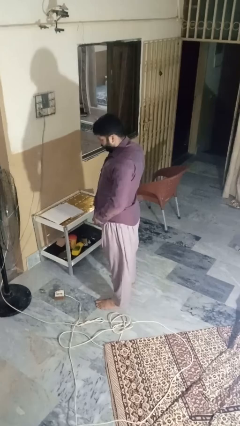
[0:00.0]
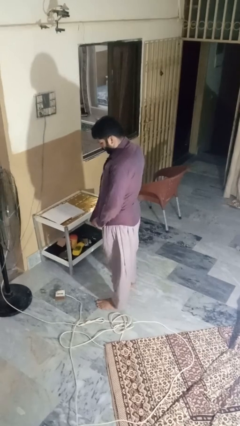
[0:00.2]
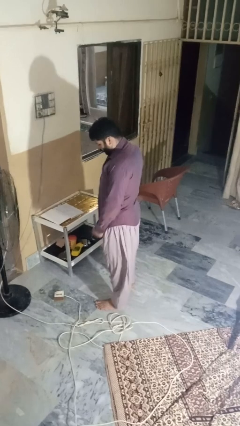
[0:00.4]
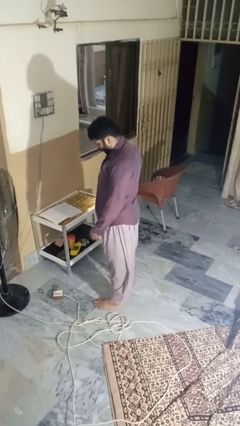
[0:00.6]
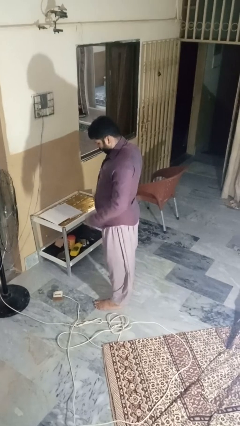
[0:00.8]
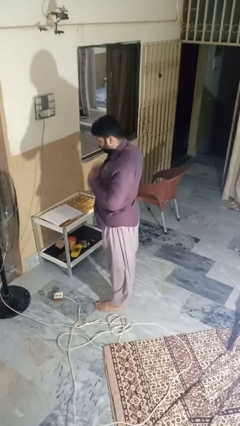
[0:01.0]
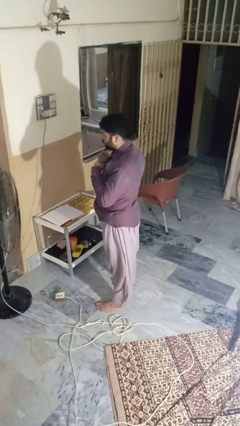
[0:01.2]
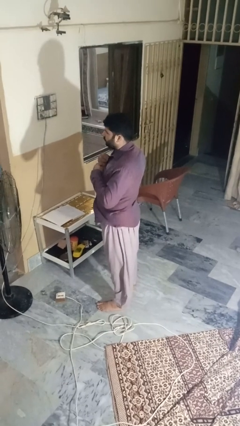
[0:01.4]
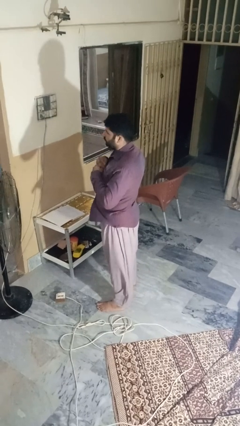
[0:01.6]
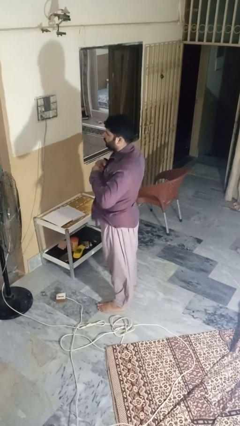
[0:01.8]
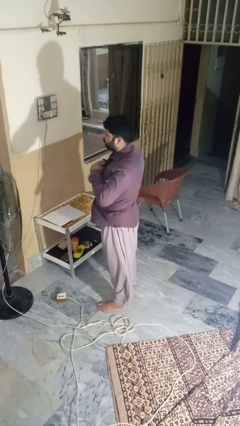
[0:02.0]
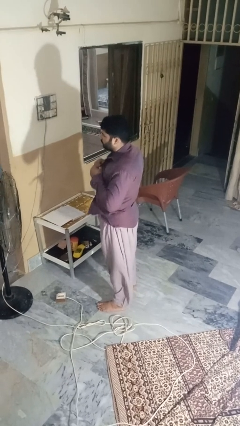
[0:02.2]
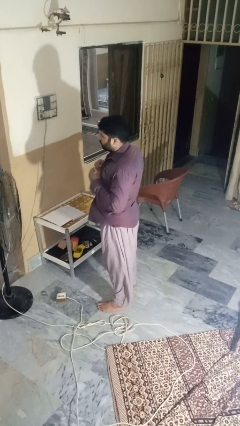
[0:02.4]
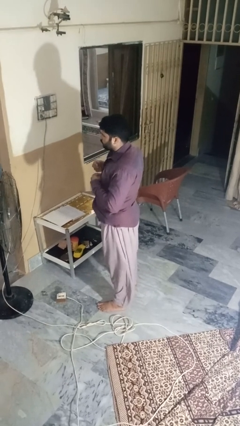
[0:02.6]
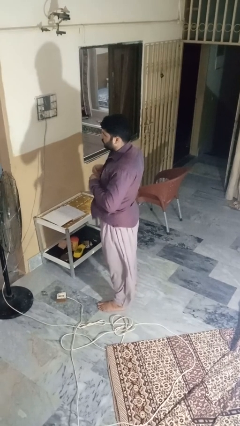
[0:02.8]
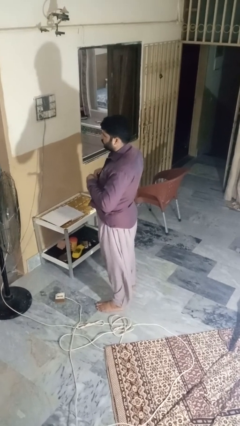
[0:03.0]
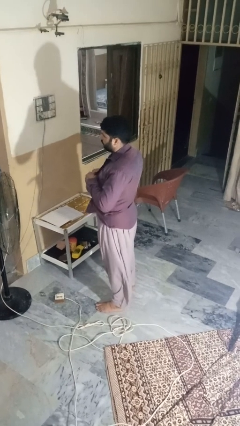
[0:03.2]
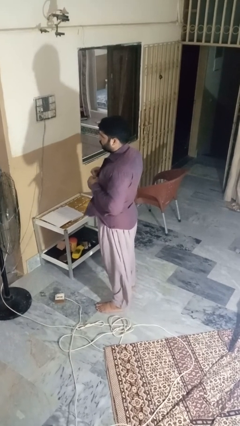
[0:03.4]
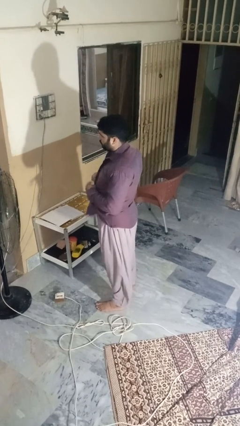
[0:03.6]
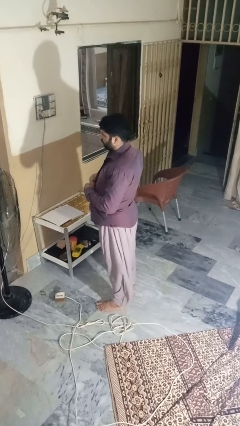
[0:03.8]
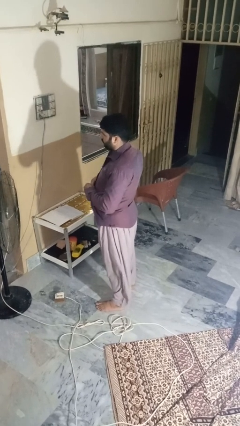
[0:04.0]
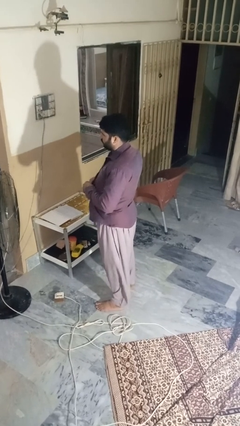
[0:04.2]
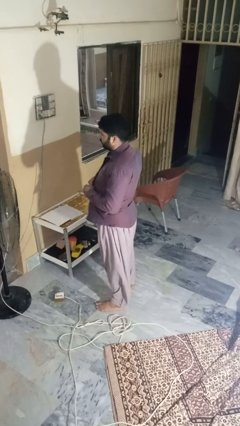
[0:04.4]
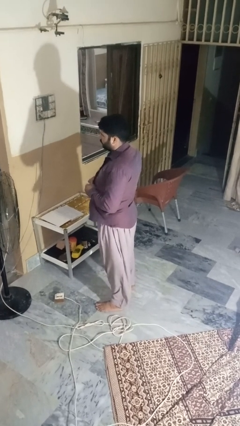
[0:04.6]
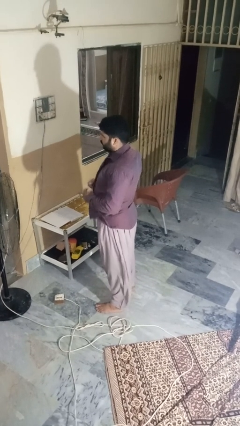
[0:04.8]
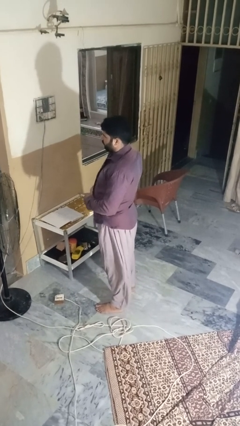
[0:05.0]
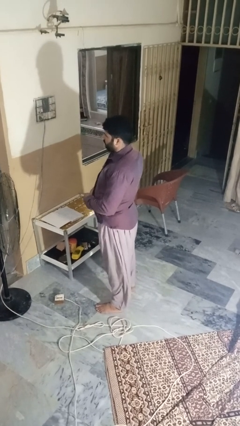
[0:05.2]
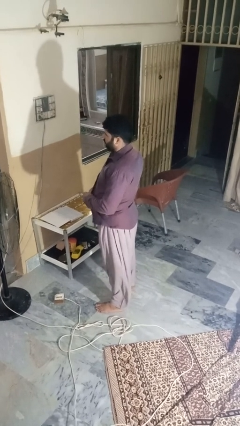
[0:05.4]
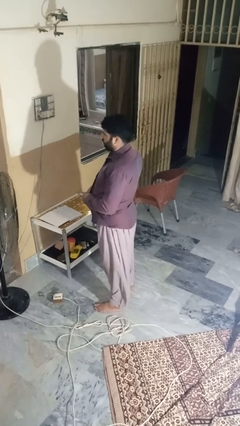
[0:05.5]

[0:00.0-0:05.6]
person unbuttons shirt

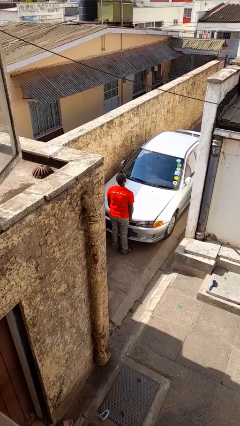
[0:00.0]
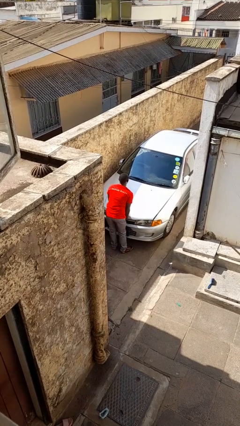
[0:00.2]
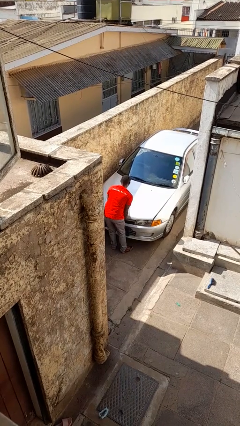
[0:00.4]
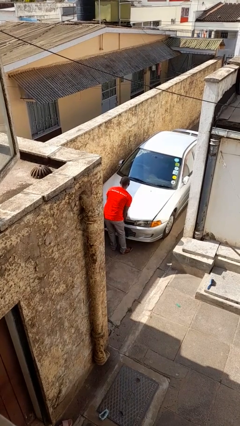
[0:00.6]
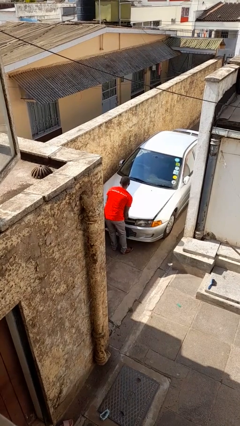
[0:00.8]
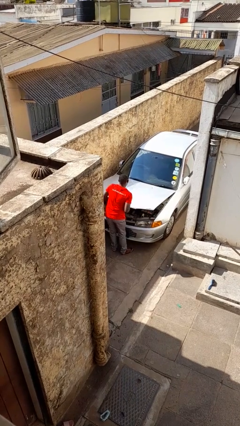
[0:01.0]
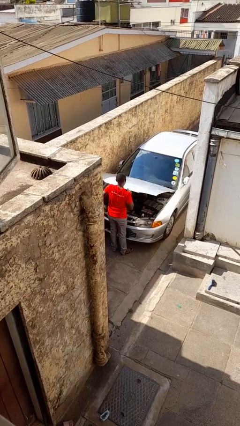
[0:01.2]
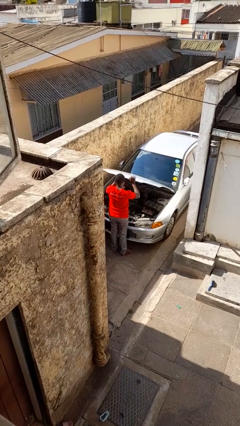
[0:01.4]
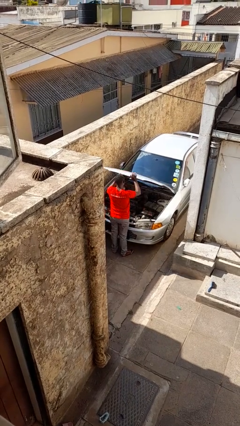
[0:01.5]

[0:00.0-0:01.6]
person opens car hood

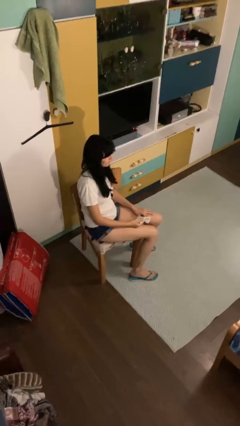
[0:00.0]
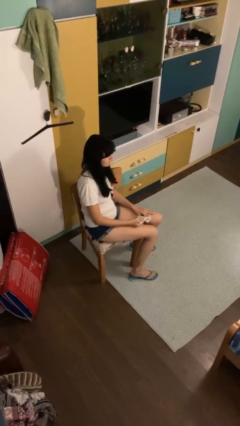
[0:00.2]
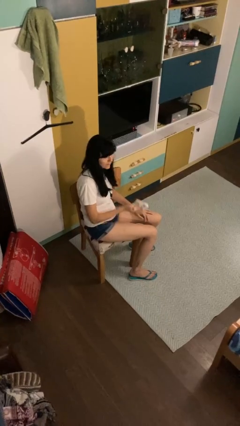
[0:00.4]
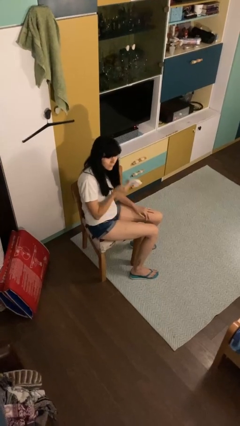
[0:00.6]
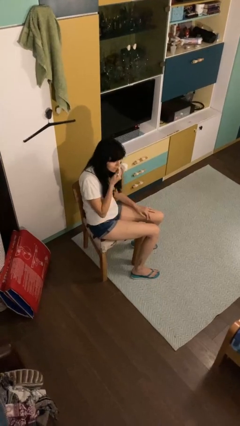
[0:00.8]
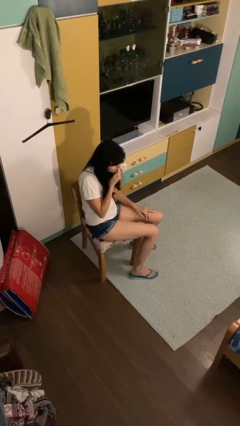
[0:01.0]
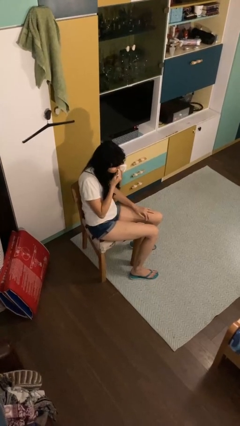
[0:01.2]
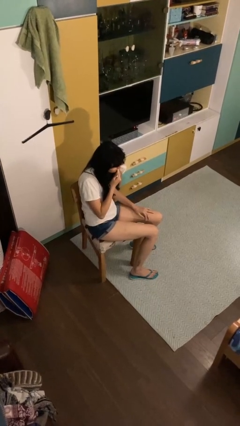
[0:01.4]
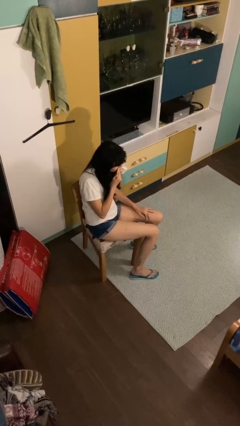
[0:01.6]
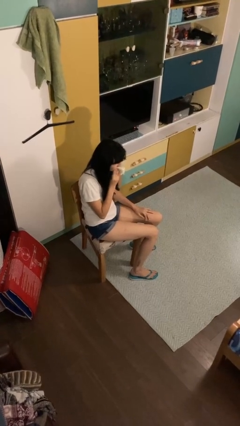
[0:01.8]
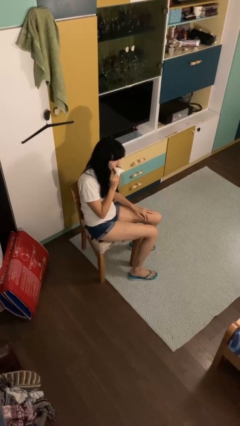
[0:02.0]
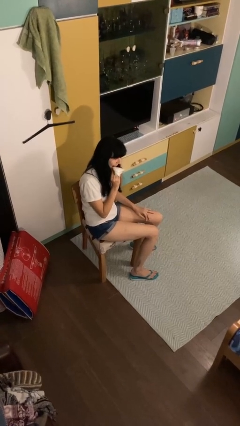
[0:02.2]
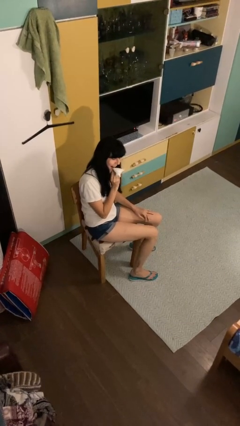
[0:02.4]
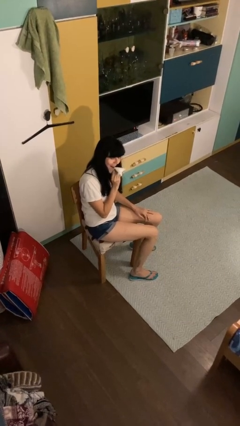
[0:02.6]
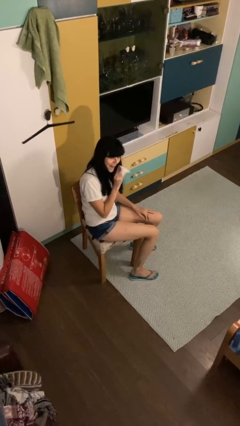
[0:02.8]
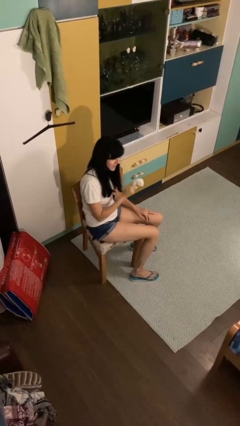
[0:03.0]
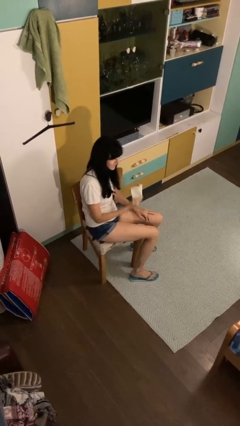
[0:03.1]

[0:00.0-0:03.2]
person wipes mouth with napkin

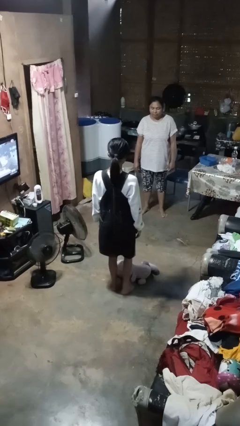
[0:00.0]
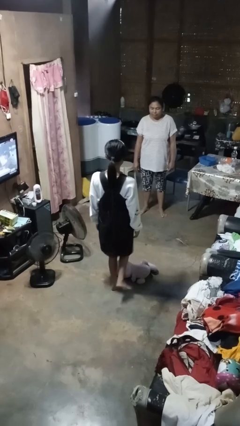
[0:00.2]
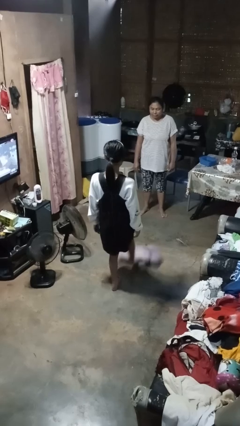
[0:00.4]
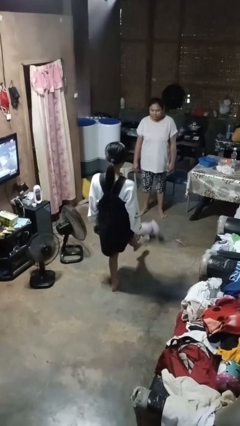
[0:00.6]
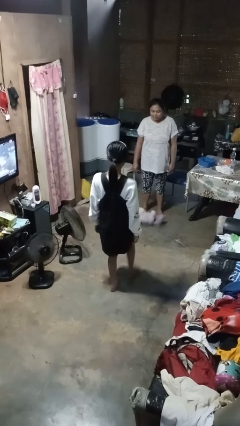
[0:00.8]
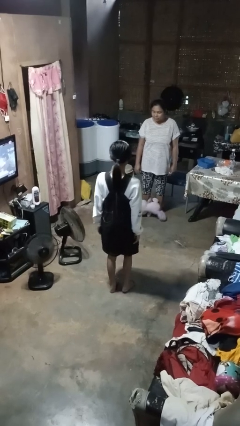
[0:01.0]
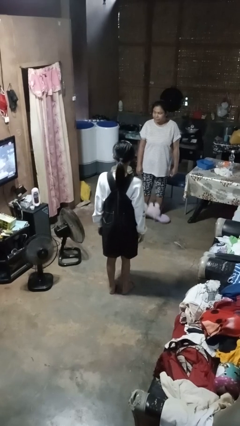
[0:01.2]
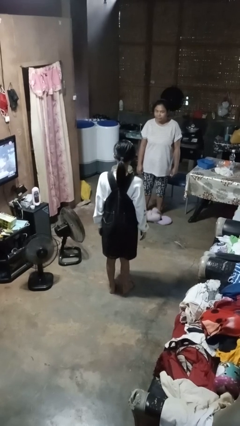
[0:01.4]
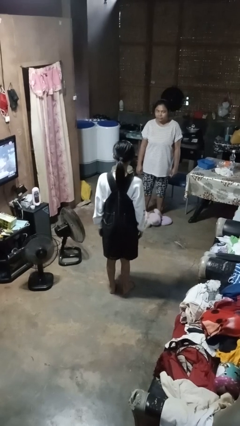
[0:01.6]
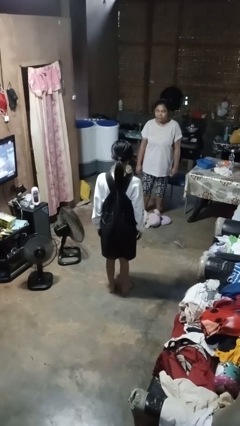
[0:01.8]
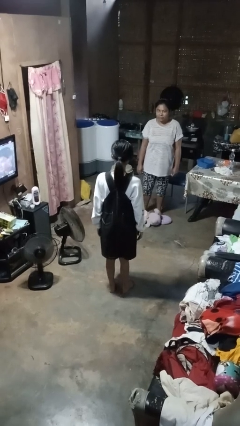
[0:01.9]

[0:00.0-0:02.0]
person kicks object to person

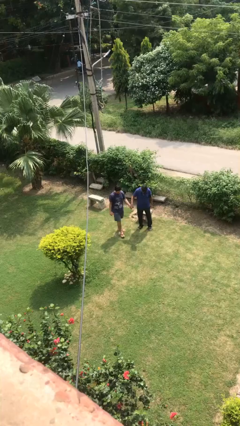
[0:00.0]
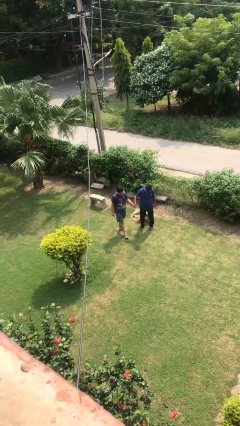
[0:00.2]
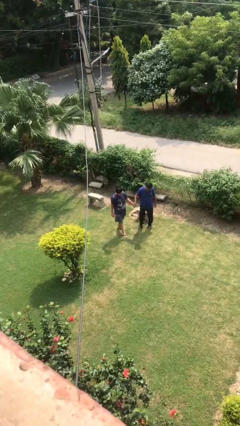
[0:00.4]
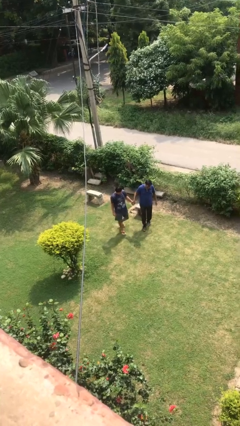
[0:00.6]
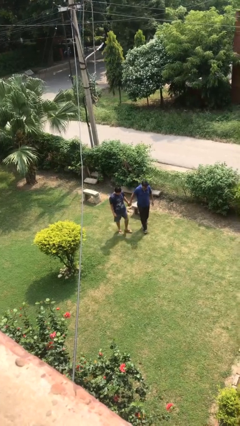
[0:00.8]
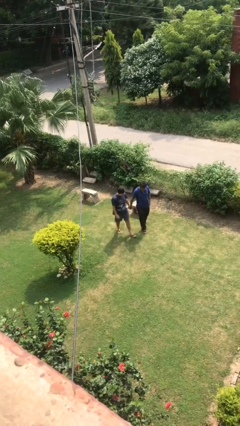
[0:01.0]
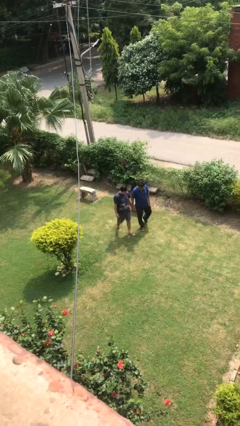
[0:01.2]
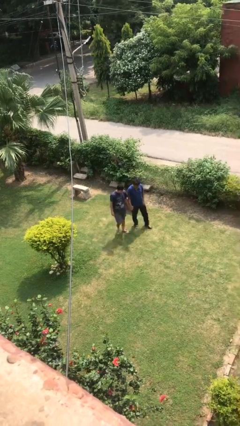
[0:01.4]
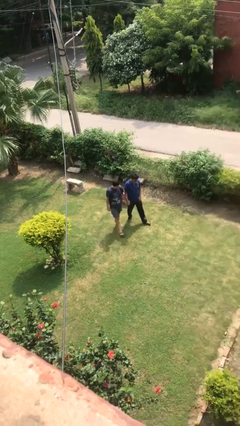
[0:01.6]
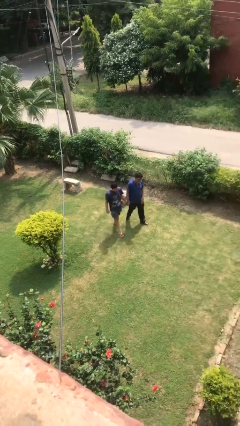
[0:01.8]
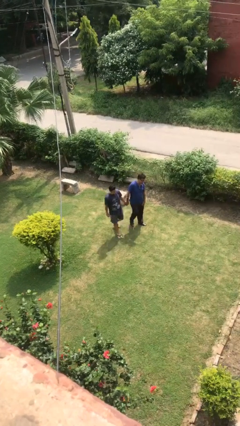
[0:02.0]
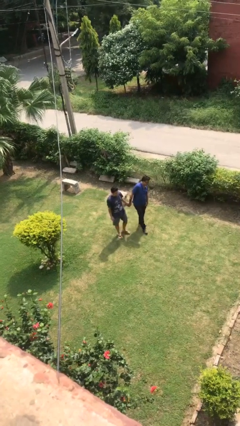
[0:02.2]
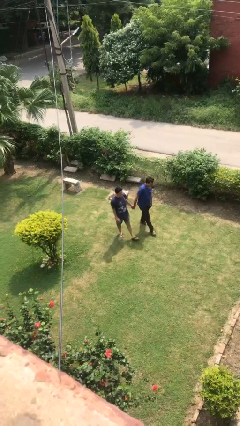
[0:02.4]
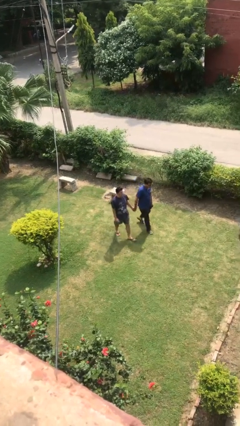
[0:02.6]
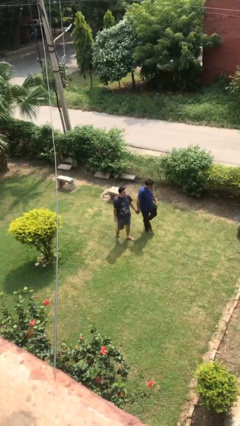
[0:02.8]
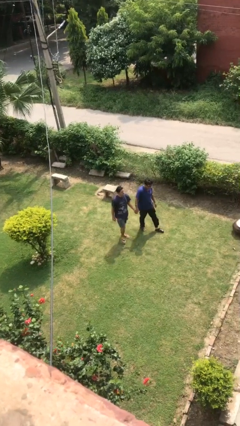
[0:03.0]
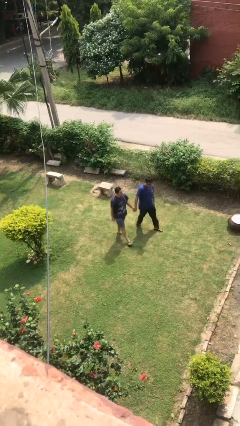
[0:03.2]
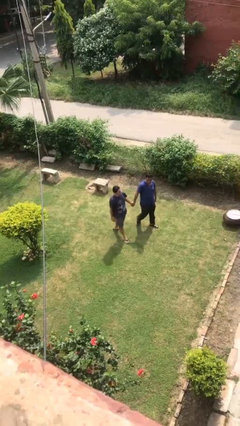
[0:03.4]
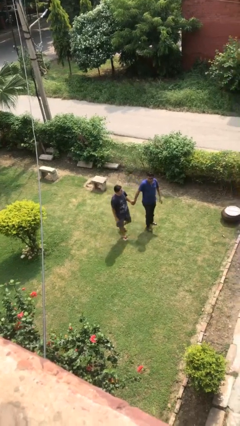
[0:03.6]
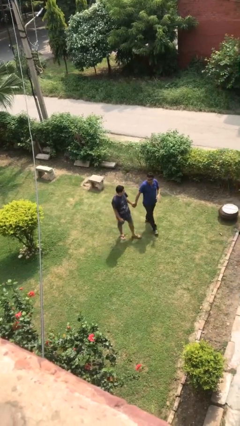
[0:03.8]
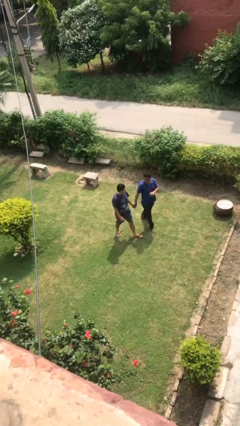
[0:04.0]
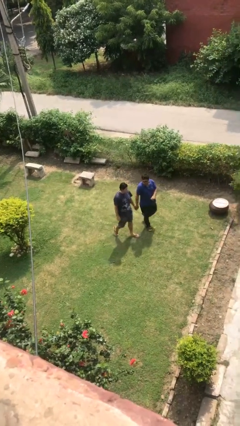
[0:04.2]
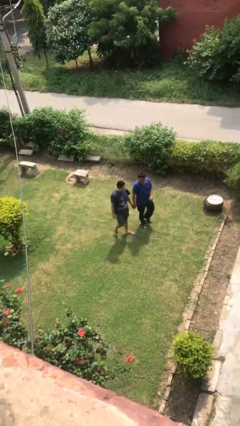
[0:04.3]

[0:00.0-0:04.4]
person holds hand

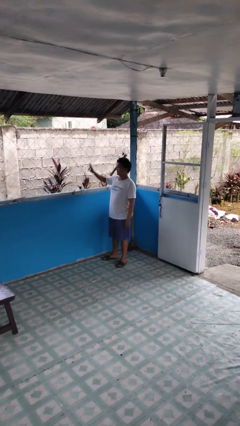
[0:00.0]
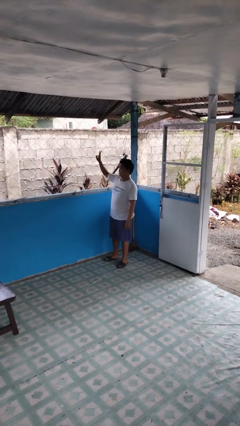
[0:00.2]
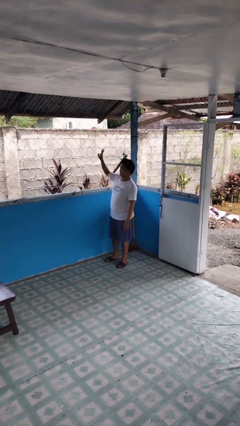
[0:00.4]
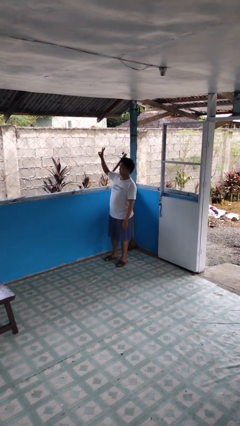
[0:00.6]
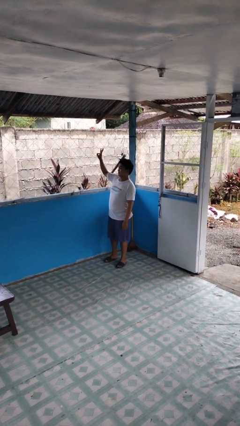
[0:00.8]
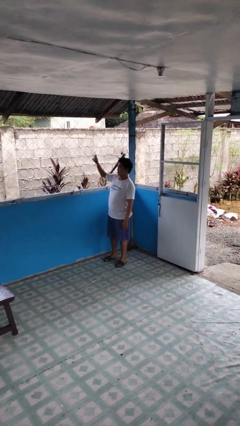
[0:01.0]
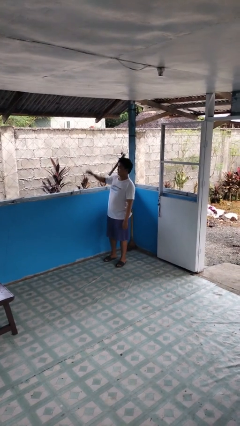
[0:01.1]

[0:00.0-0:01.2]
person gestures number three
